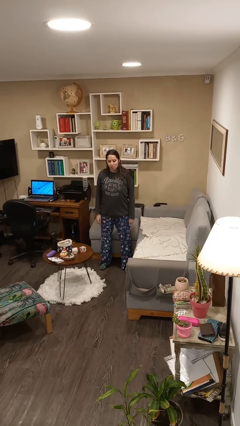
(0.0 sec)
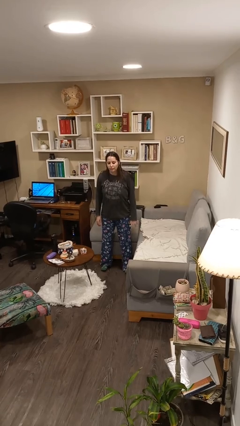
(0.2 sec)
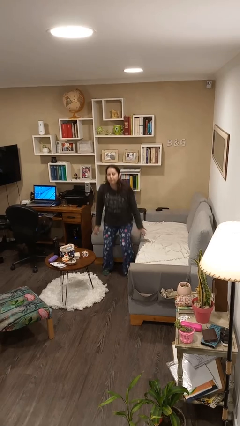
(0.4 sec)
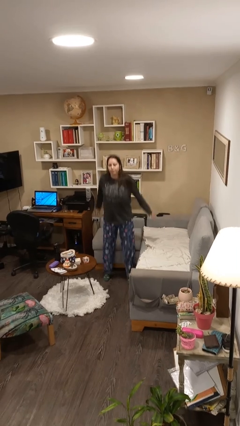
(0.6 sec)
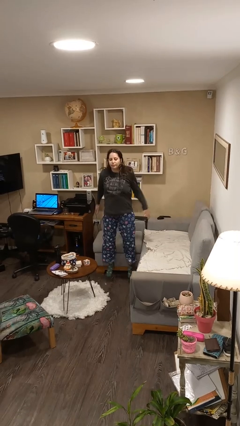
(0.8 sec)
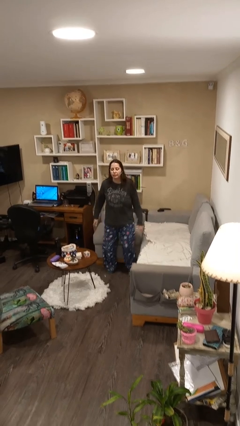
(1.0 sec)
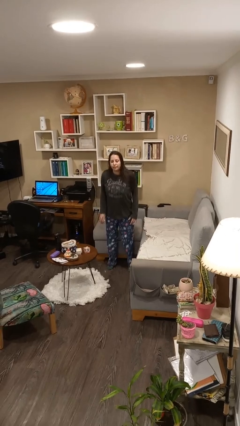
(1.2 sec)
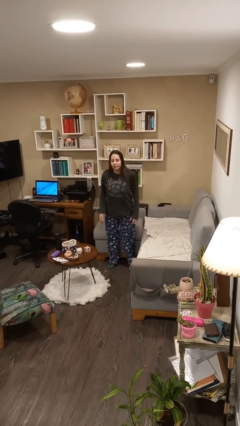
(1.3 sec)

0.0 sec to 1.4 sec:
person jumps

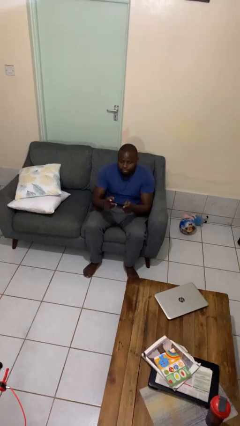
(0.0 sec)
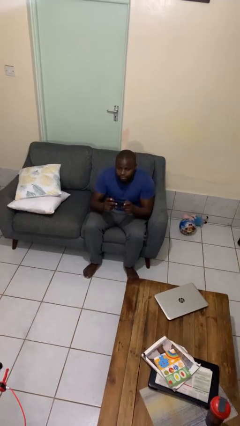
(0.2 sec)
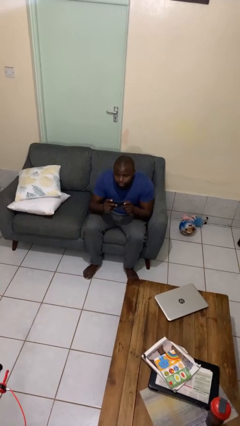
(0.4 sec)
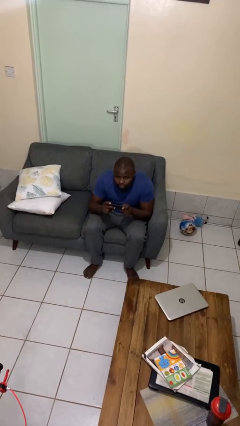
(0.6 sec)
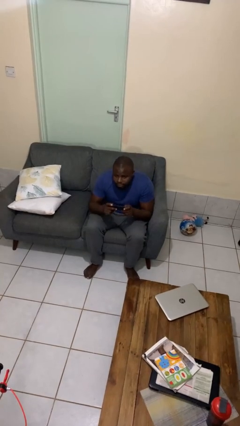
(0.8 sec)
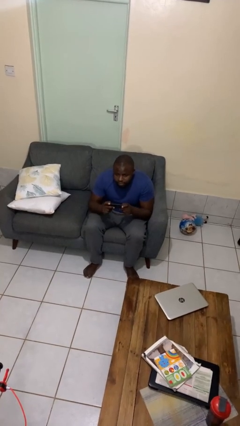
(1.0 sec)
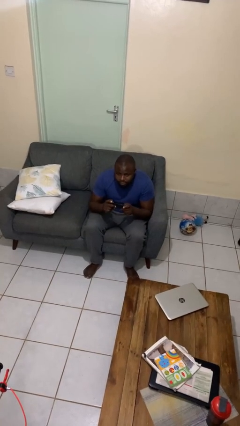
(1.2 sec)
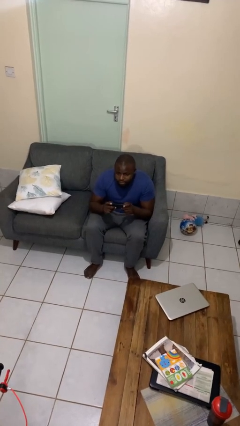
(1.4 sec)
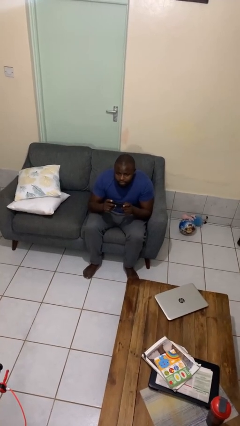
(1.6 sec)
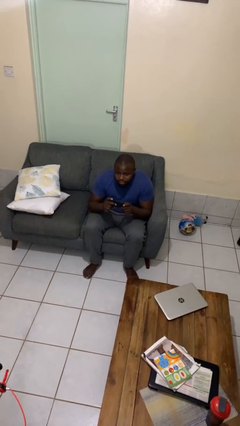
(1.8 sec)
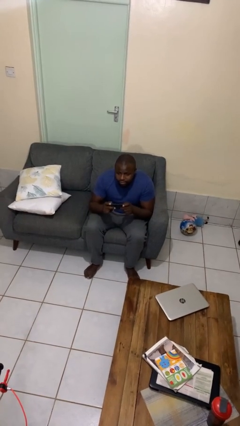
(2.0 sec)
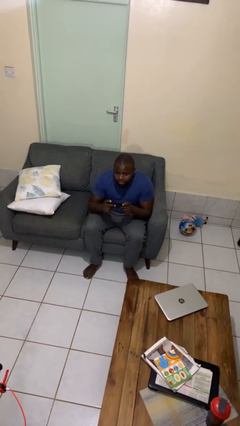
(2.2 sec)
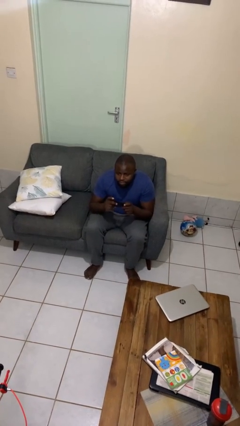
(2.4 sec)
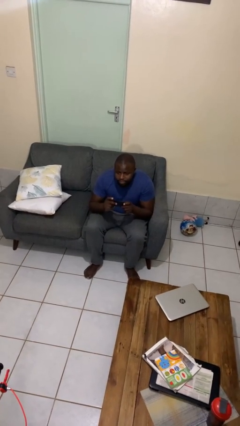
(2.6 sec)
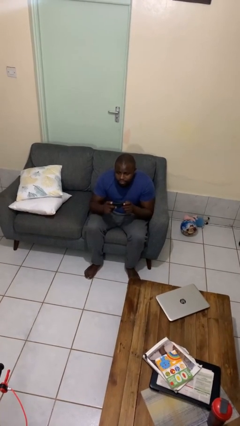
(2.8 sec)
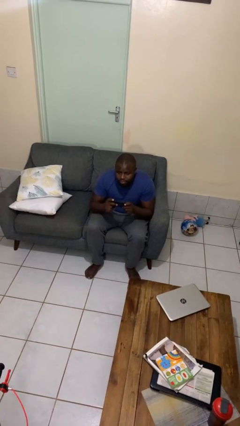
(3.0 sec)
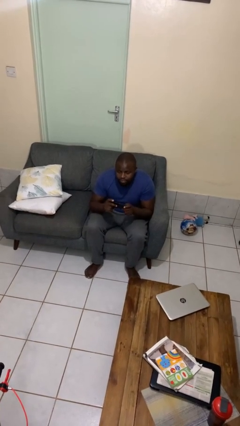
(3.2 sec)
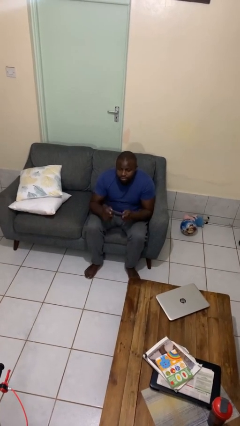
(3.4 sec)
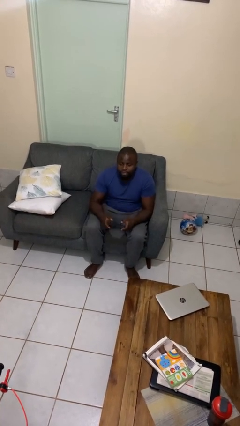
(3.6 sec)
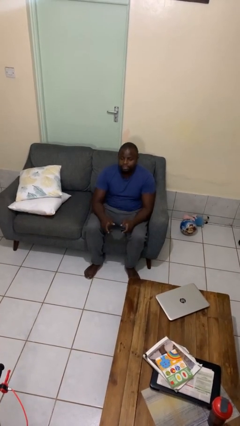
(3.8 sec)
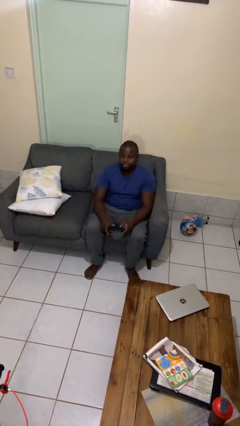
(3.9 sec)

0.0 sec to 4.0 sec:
person interacts with handheld game

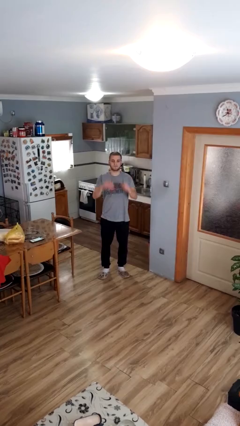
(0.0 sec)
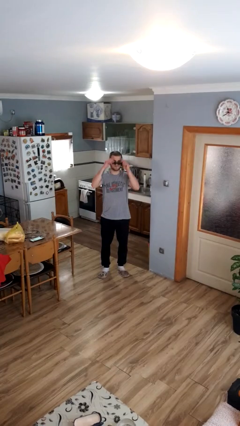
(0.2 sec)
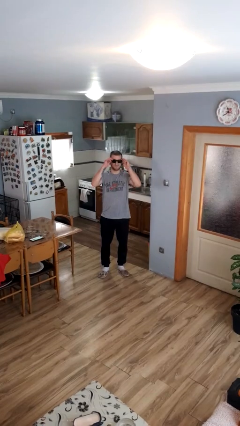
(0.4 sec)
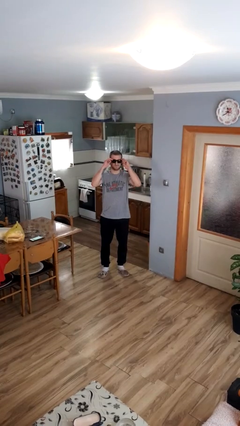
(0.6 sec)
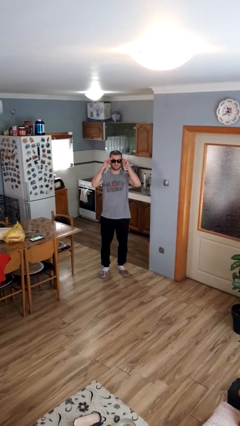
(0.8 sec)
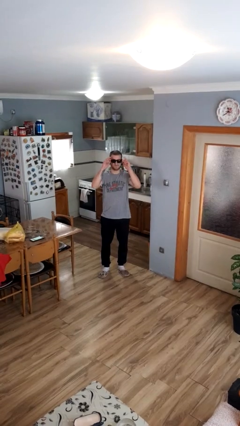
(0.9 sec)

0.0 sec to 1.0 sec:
person puts on sunglasses

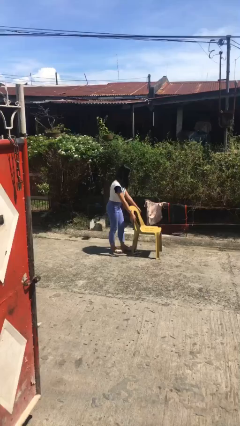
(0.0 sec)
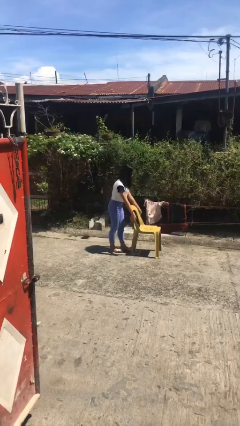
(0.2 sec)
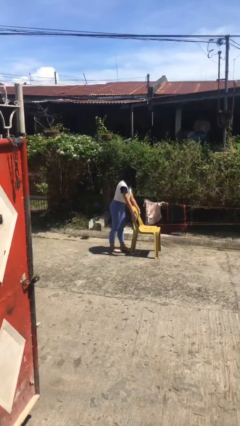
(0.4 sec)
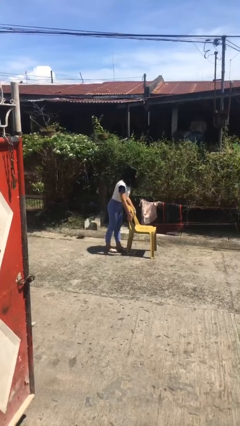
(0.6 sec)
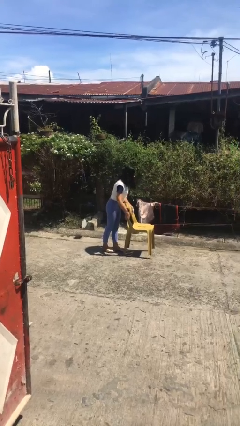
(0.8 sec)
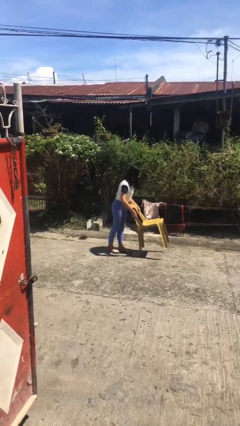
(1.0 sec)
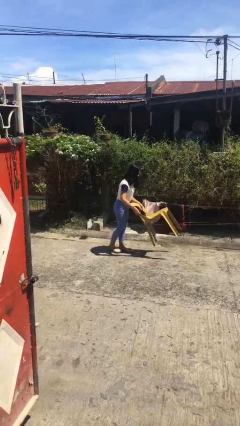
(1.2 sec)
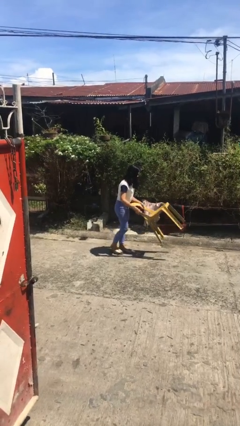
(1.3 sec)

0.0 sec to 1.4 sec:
person picks up object from floor

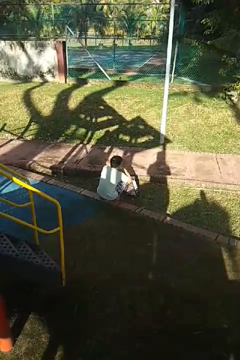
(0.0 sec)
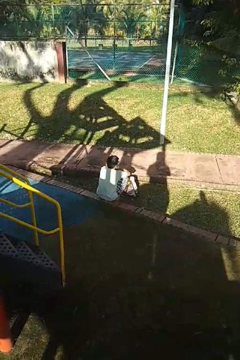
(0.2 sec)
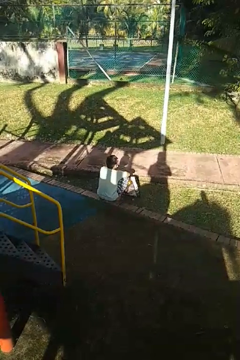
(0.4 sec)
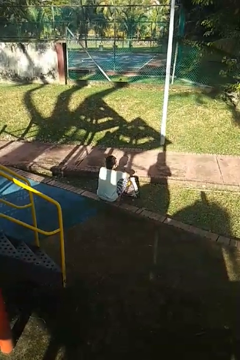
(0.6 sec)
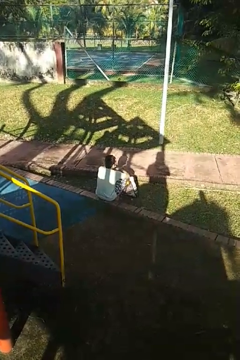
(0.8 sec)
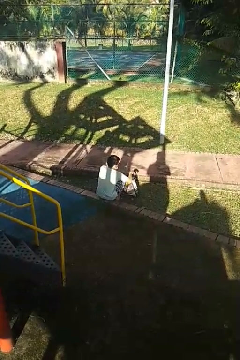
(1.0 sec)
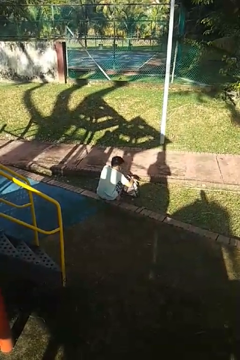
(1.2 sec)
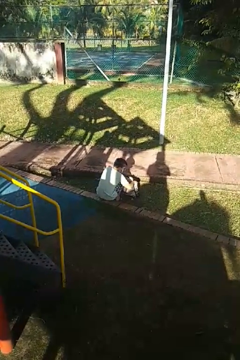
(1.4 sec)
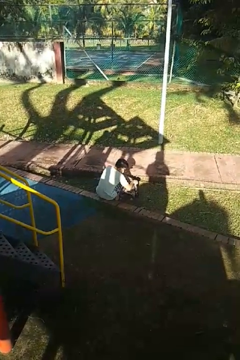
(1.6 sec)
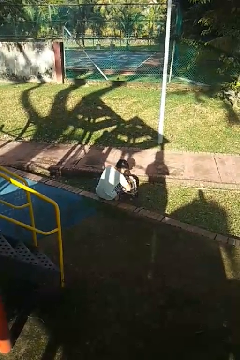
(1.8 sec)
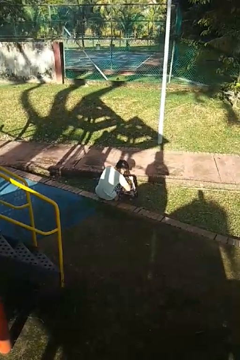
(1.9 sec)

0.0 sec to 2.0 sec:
person searches in bag

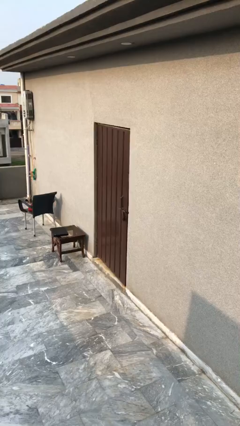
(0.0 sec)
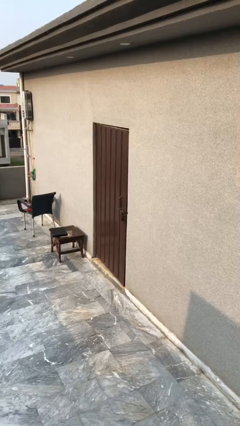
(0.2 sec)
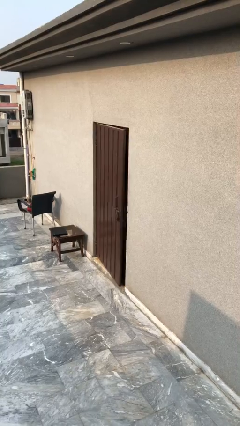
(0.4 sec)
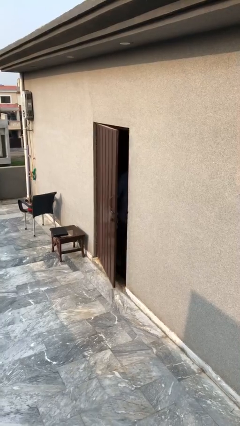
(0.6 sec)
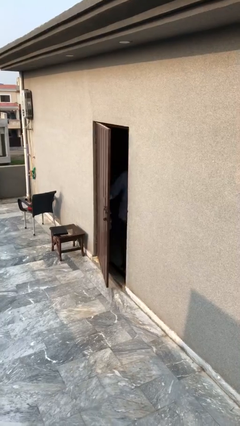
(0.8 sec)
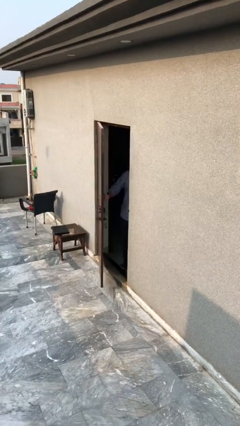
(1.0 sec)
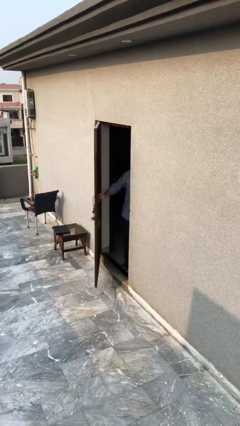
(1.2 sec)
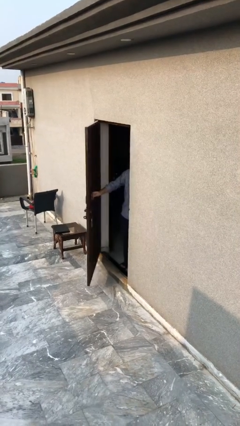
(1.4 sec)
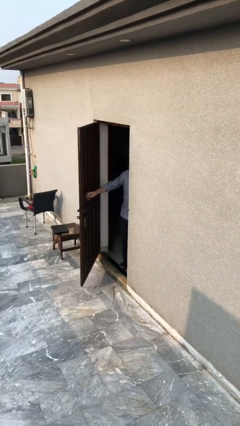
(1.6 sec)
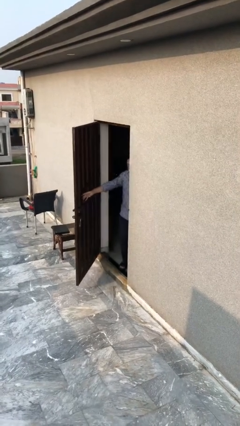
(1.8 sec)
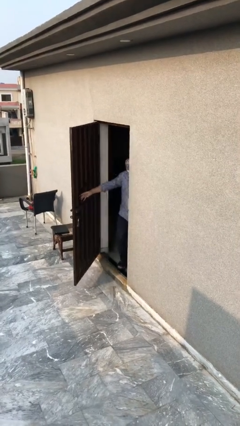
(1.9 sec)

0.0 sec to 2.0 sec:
person opens facility door

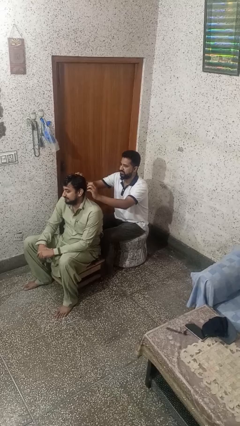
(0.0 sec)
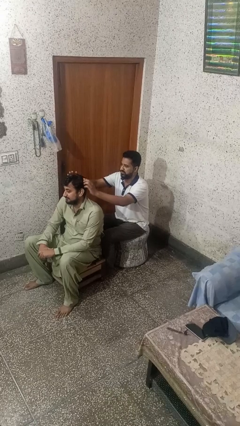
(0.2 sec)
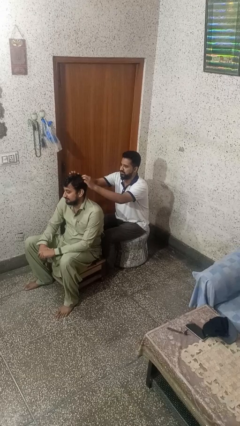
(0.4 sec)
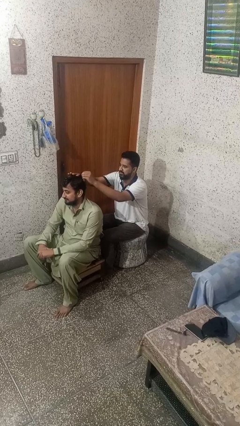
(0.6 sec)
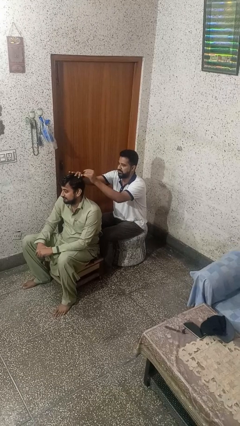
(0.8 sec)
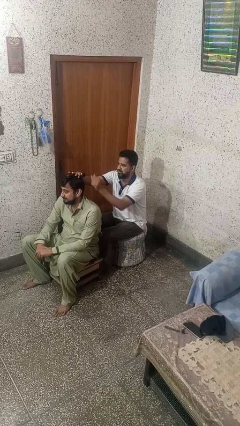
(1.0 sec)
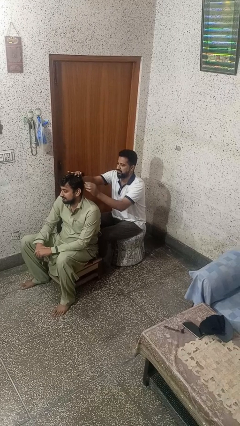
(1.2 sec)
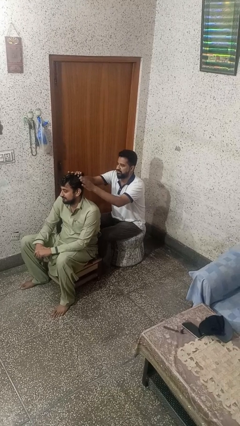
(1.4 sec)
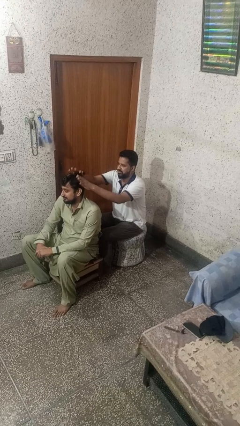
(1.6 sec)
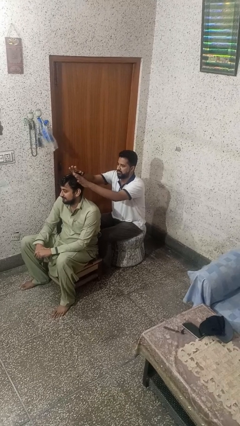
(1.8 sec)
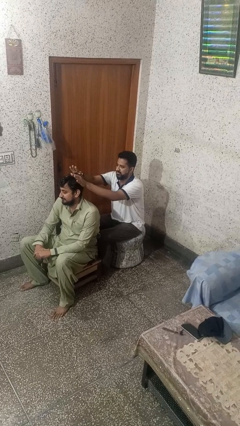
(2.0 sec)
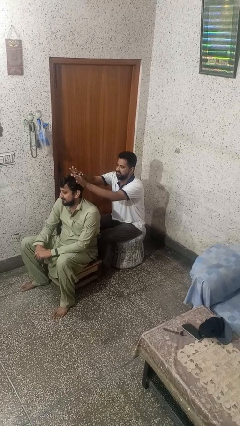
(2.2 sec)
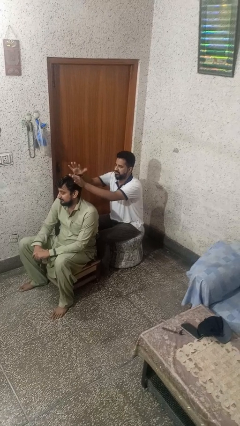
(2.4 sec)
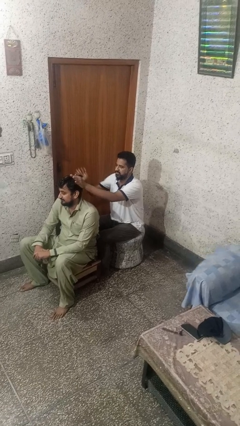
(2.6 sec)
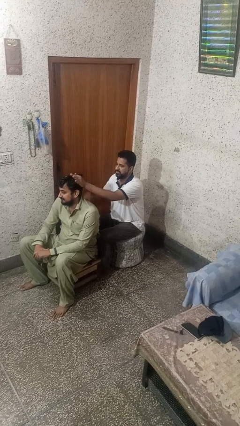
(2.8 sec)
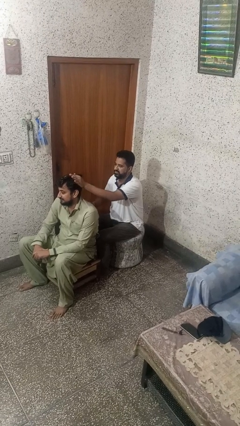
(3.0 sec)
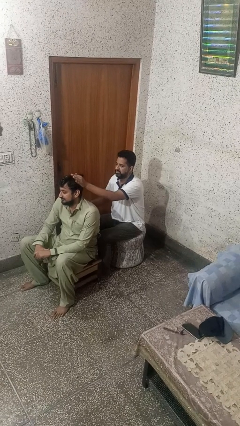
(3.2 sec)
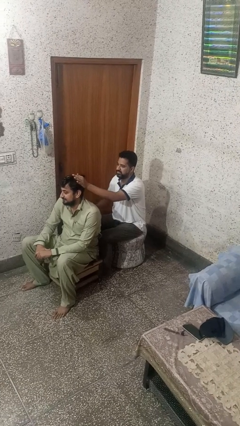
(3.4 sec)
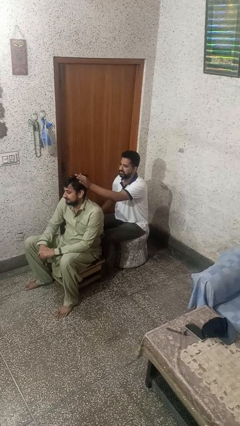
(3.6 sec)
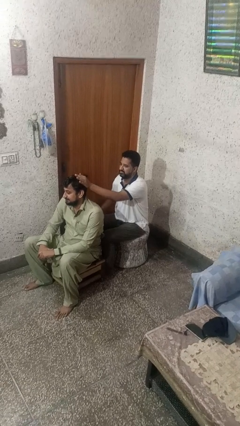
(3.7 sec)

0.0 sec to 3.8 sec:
person braids hair of person

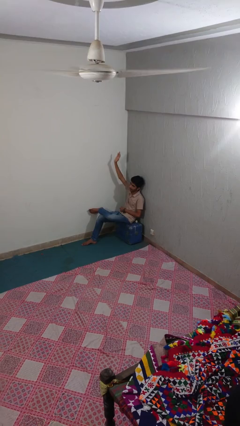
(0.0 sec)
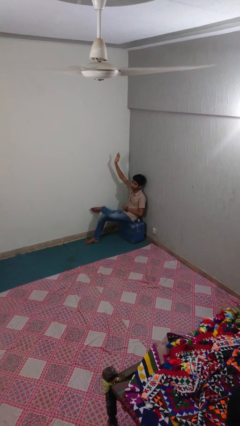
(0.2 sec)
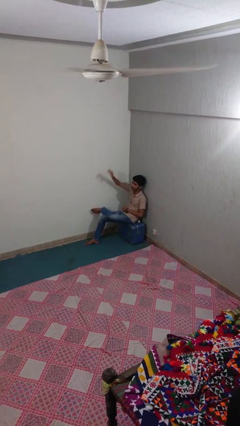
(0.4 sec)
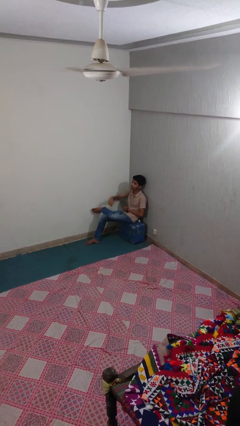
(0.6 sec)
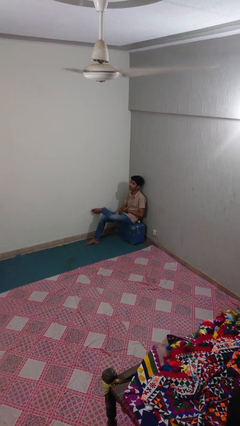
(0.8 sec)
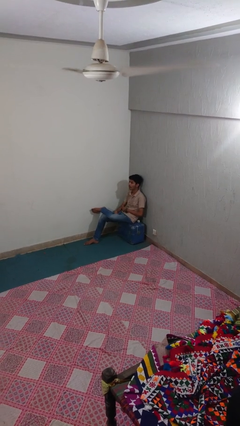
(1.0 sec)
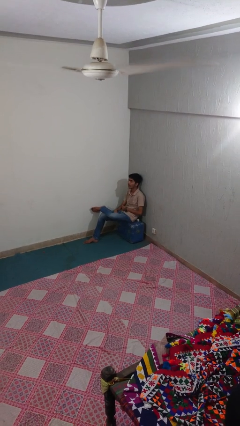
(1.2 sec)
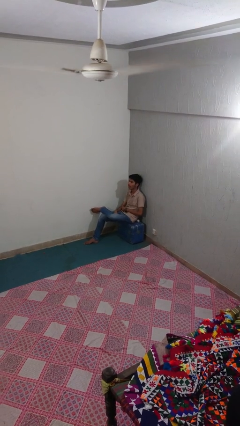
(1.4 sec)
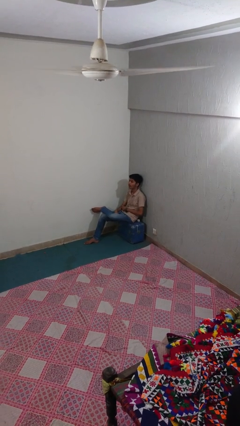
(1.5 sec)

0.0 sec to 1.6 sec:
person gestures lower hand
